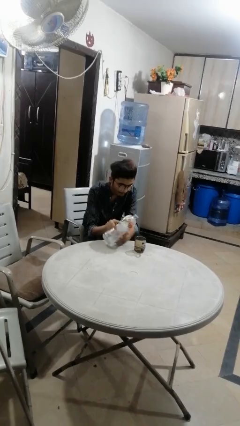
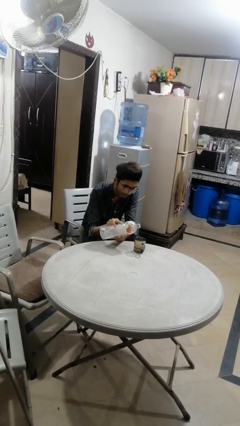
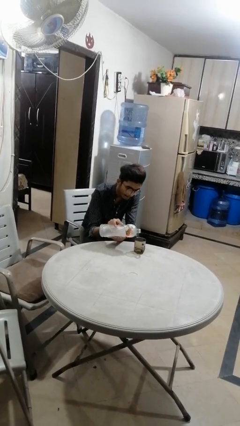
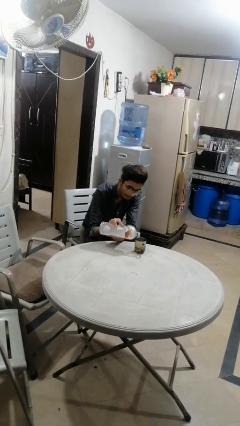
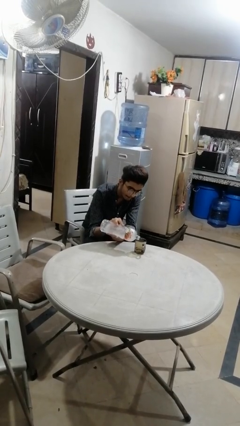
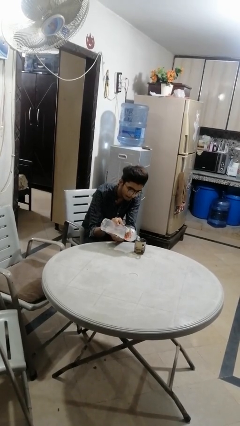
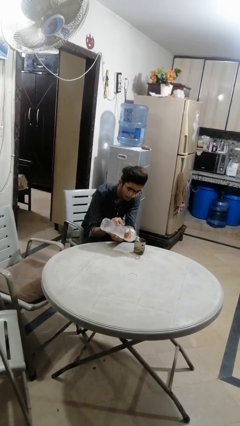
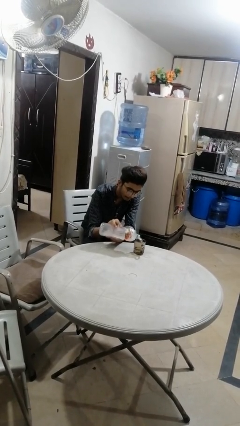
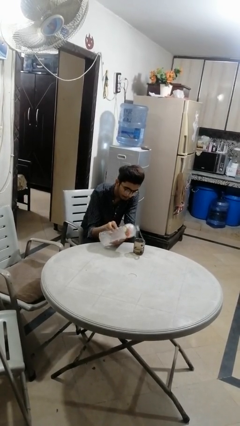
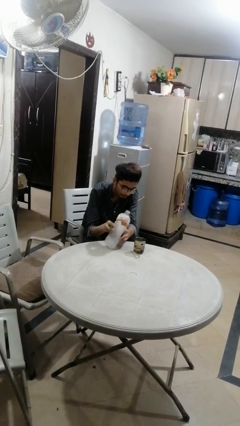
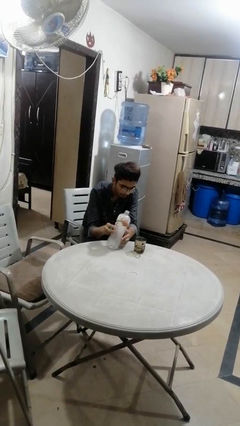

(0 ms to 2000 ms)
person pours liquid into cup

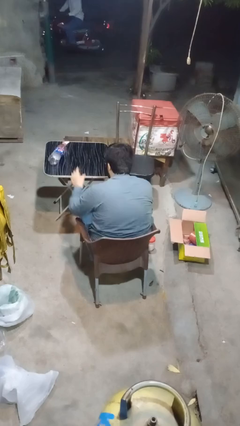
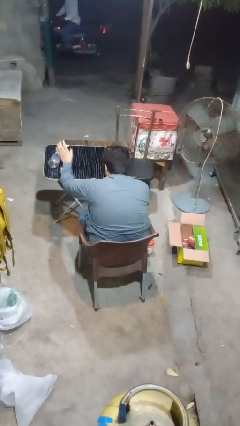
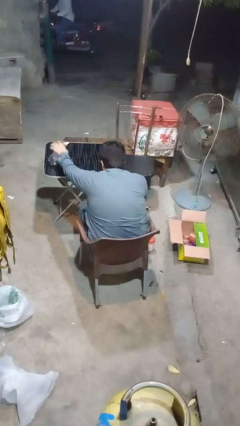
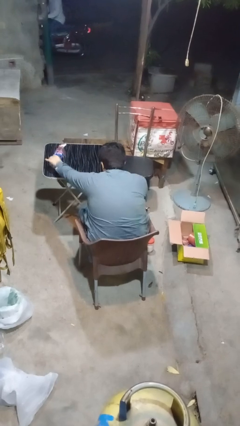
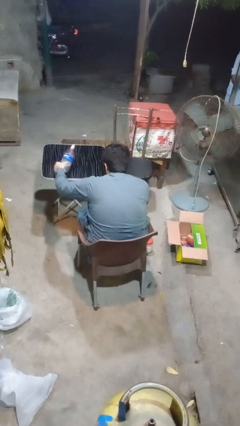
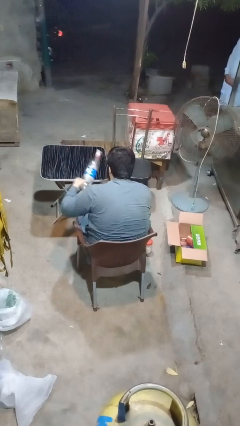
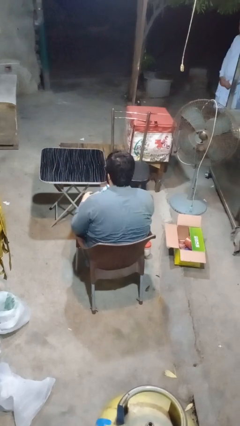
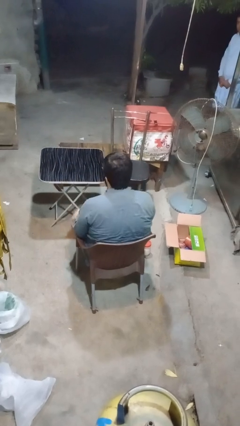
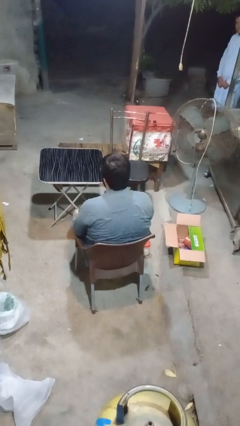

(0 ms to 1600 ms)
person picks up object from table

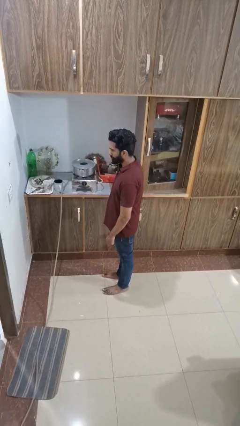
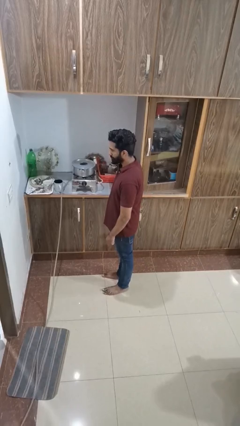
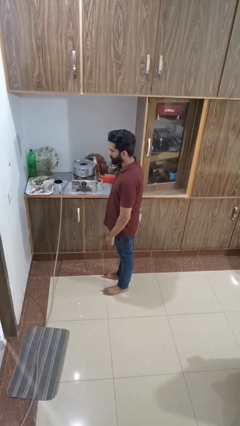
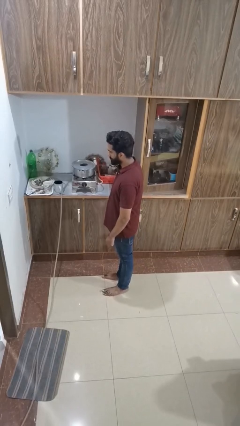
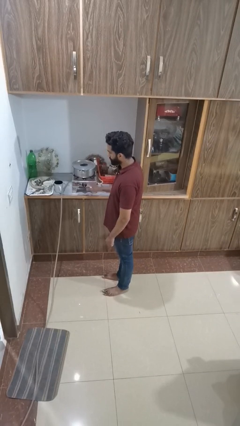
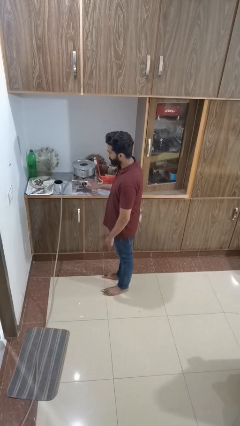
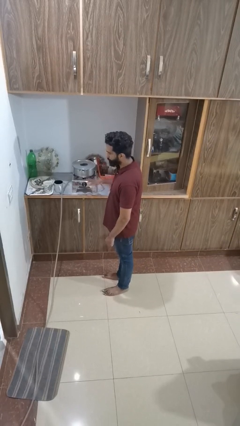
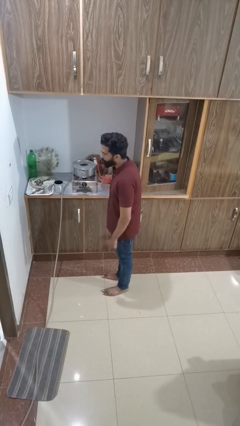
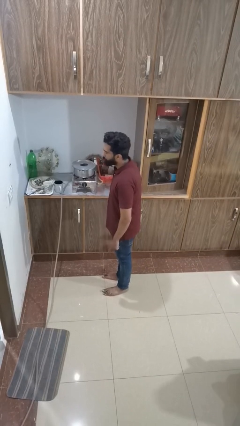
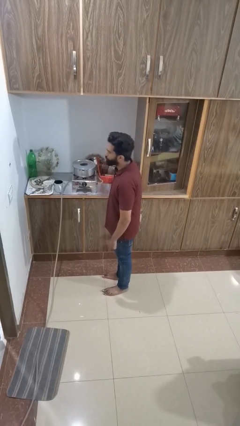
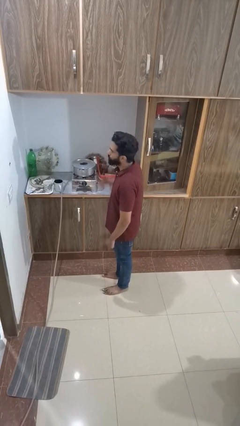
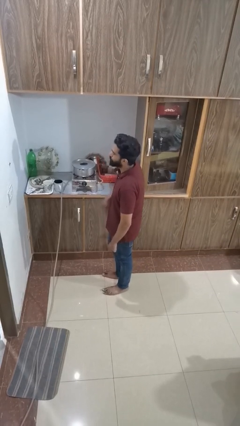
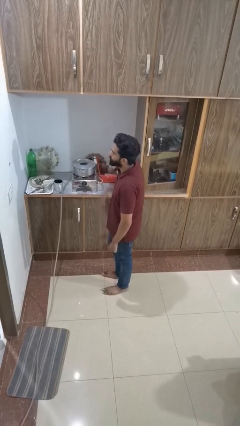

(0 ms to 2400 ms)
person burns hand

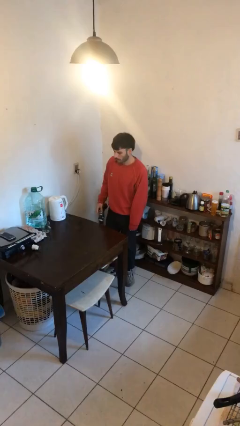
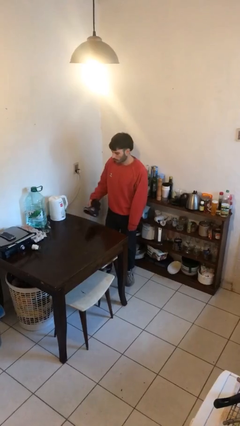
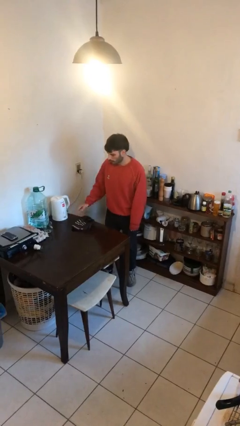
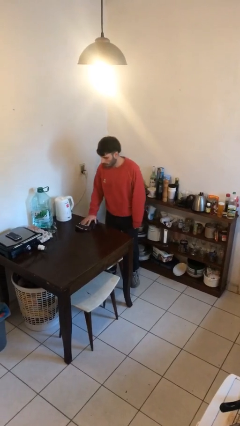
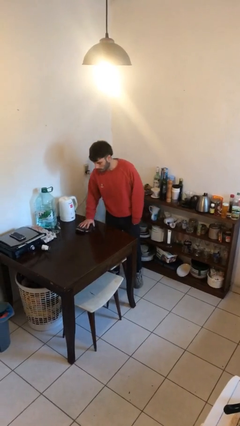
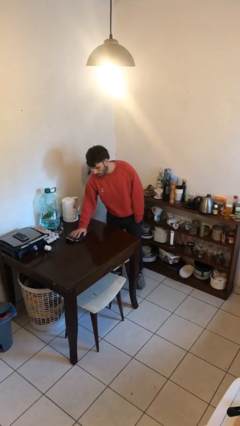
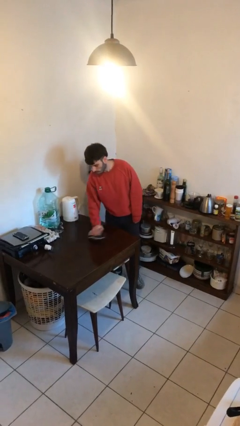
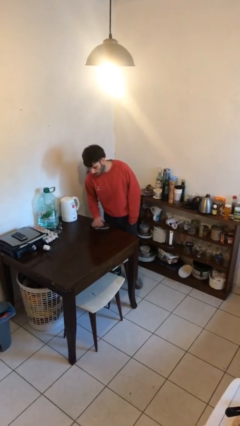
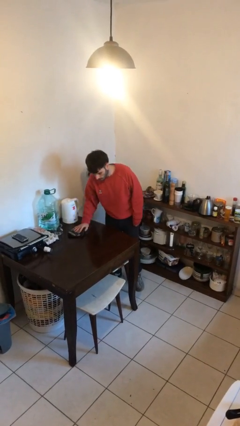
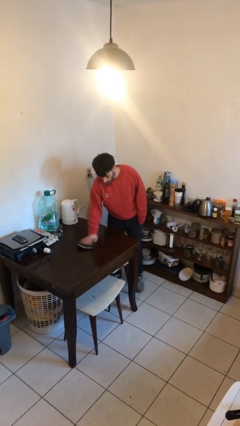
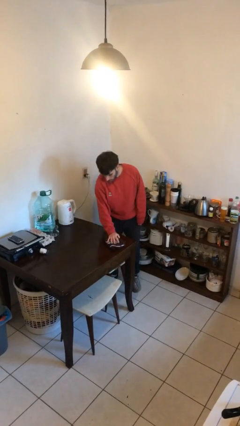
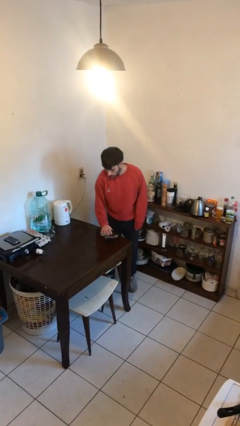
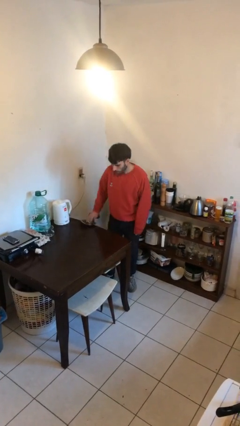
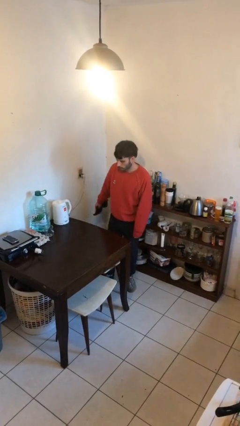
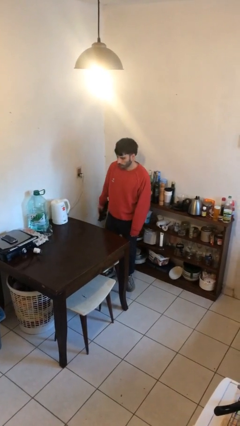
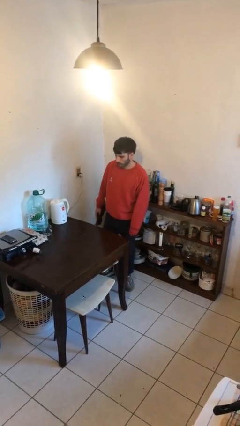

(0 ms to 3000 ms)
person cleans table with rag

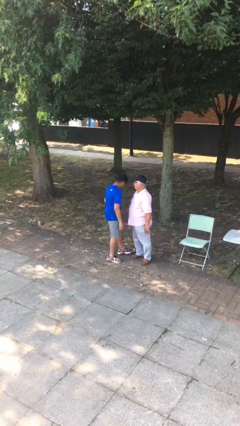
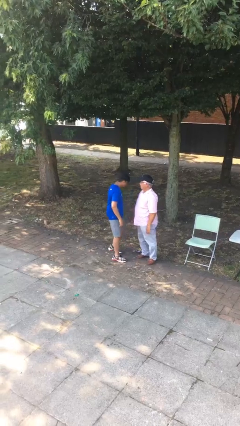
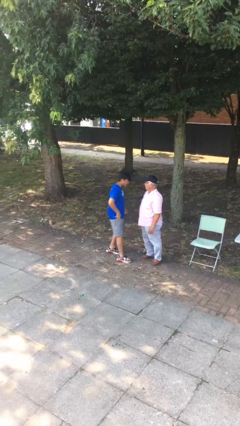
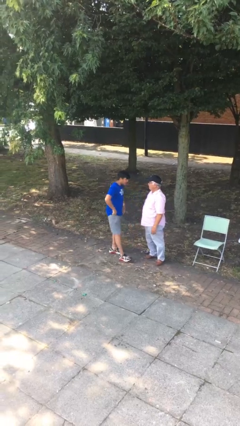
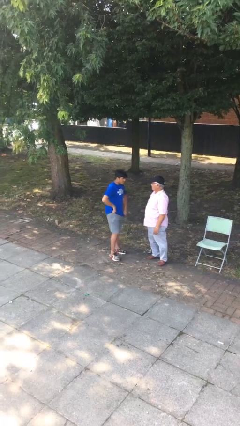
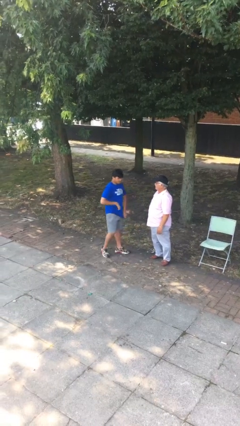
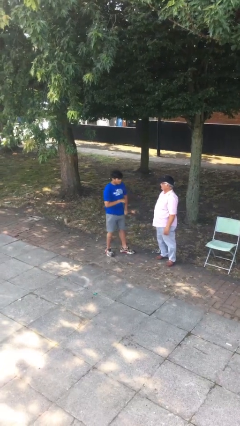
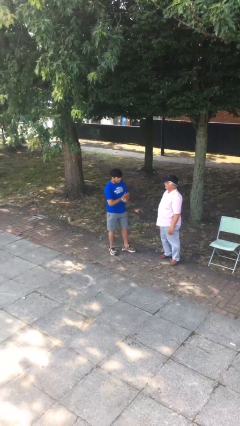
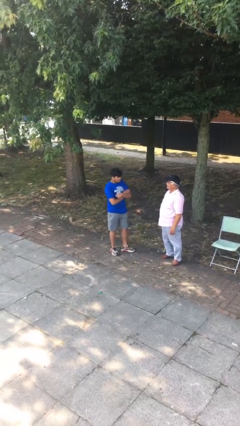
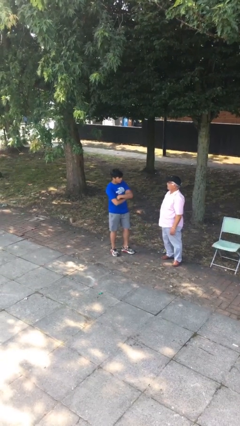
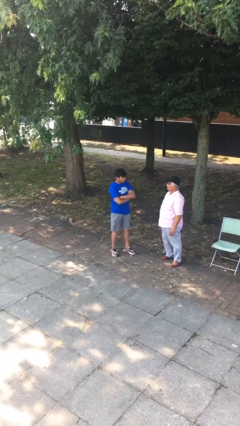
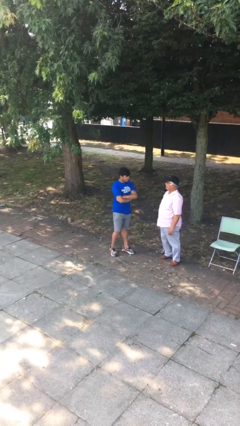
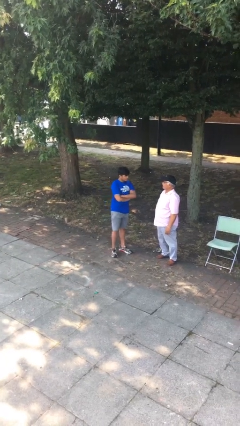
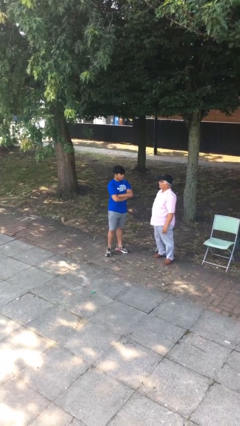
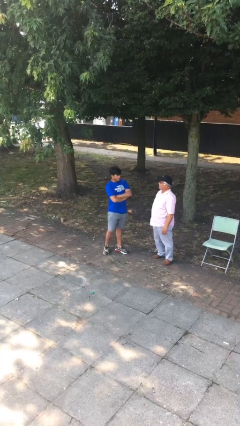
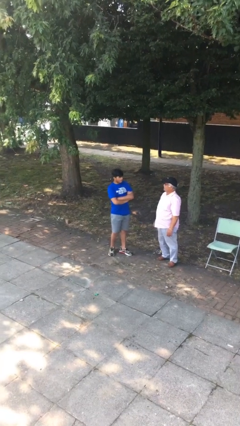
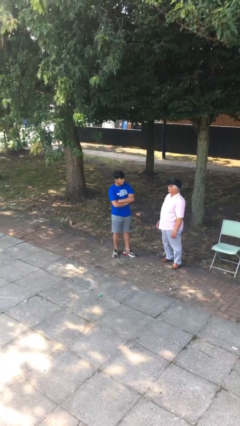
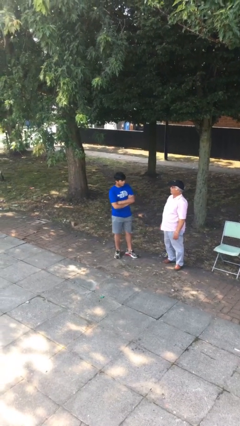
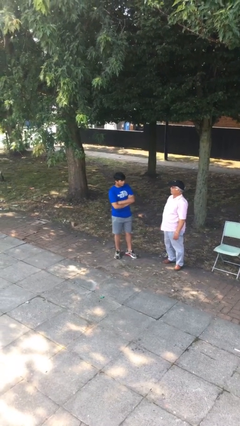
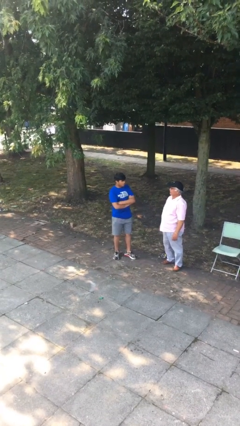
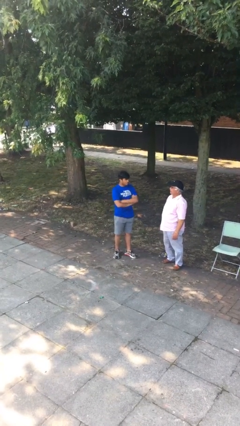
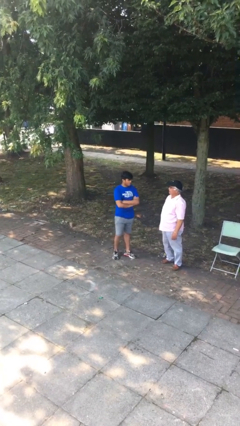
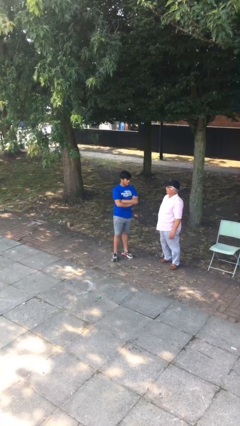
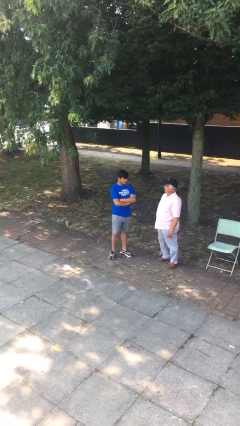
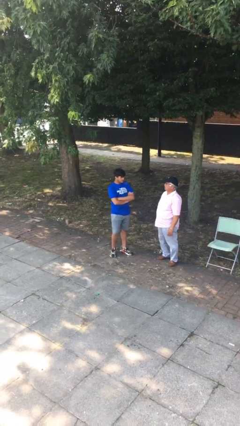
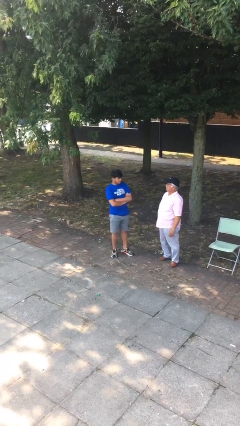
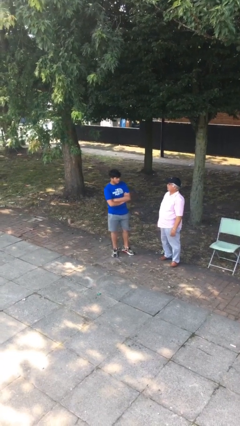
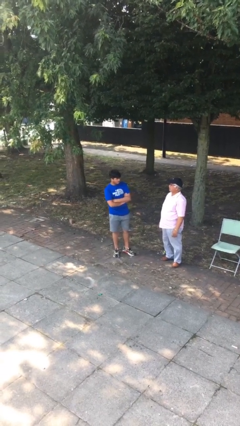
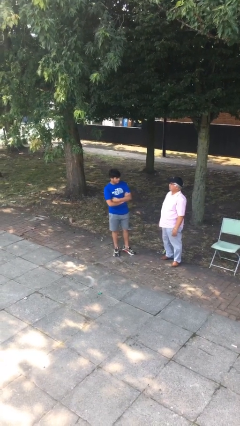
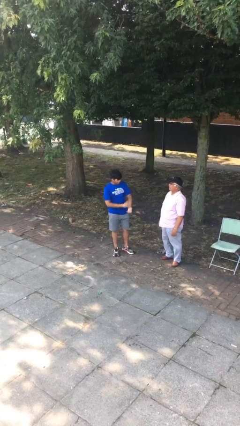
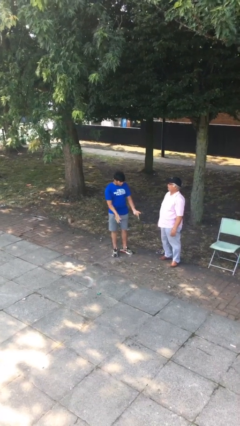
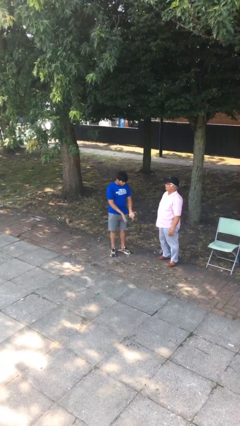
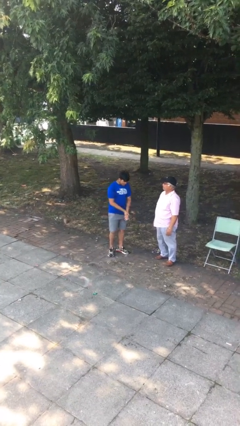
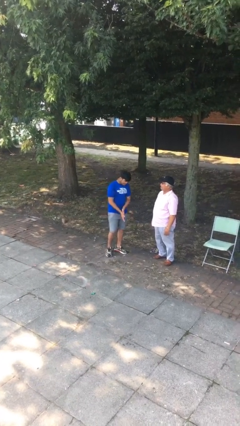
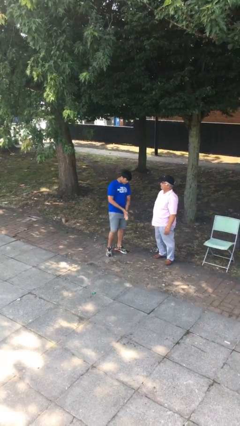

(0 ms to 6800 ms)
person talks to person

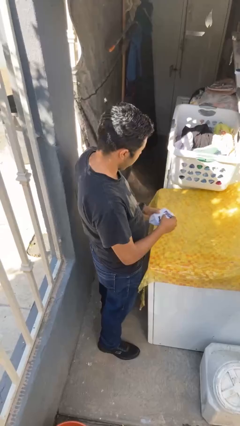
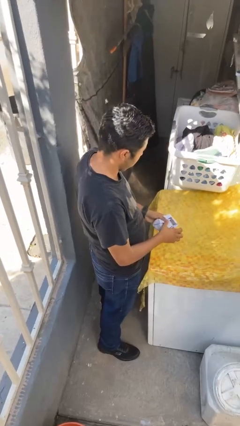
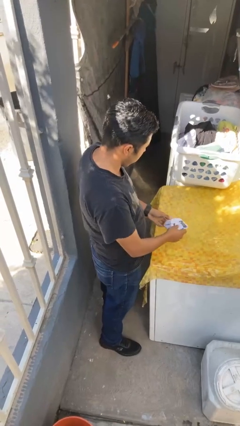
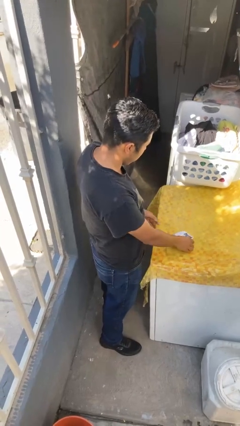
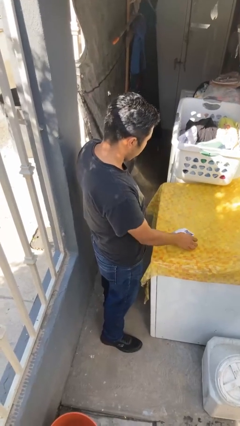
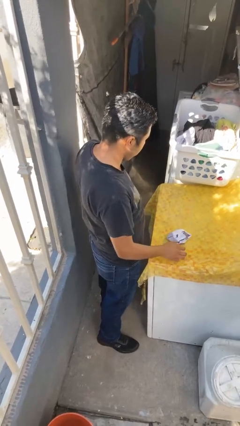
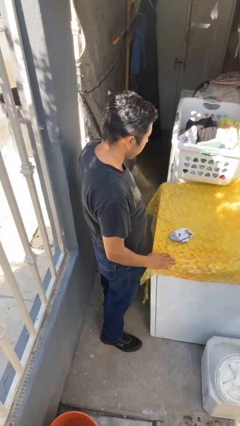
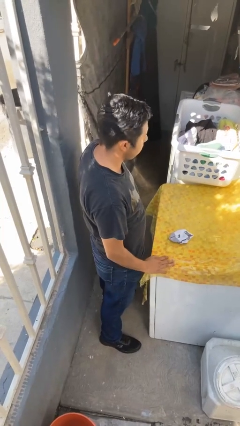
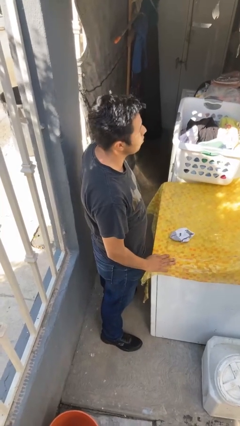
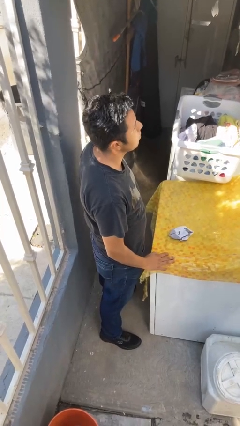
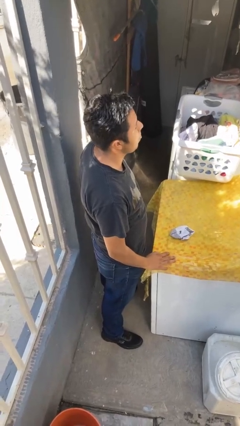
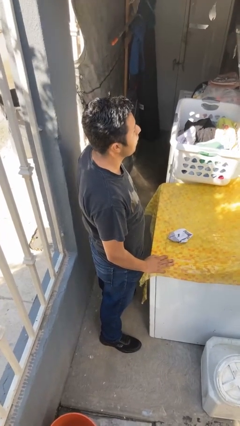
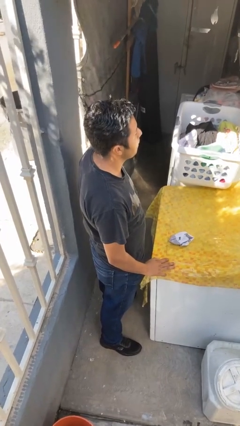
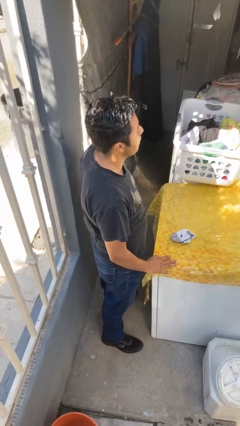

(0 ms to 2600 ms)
person folds socks
